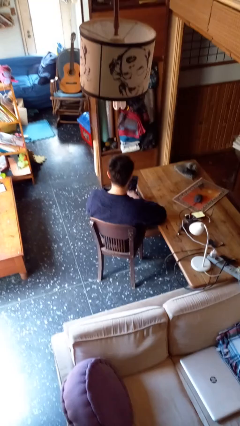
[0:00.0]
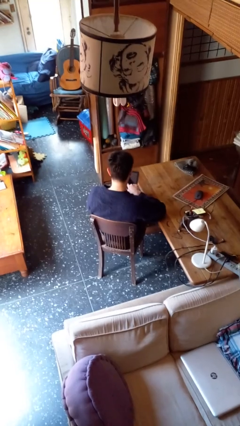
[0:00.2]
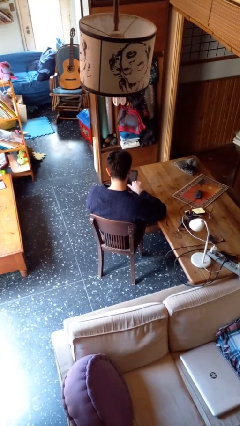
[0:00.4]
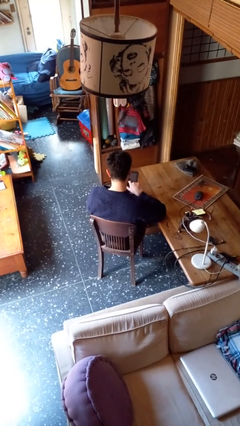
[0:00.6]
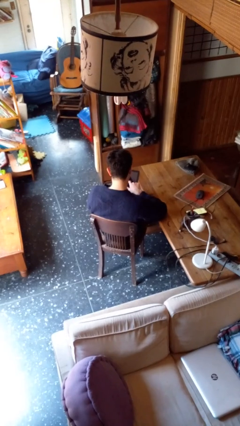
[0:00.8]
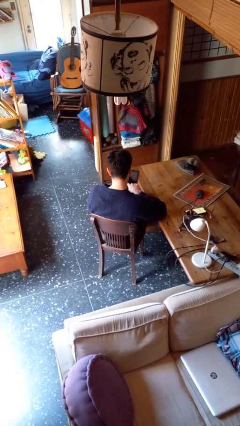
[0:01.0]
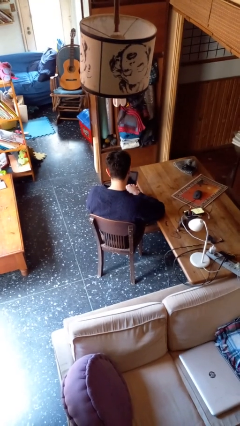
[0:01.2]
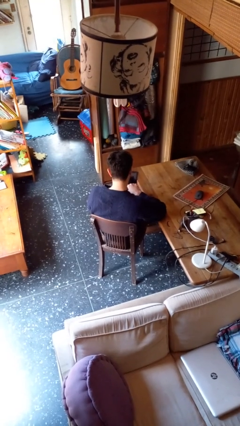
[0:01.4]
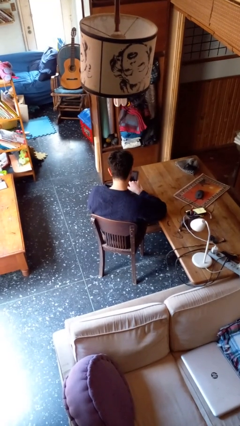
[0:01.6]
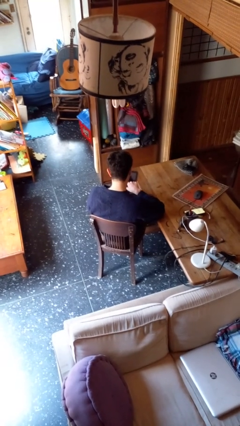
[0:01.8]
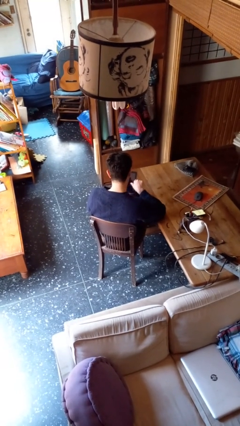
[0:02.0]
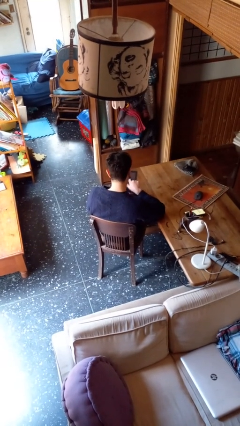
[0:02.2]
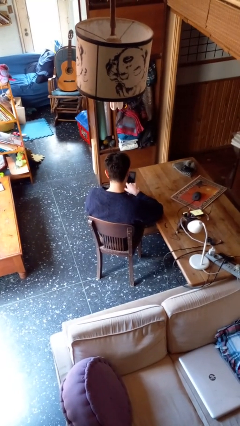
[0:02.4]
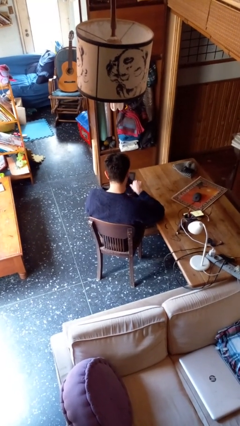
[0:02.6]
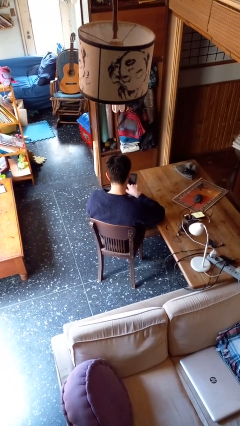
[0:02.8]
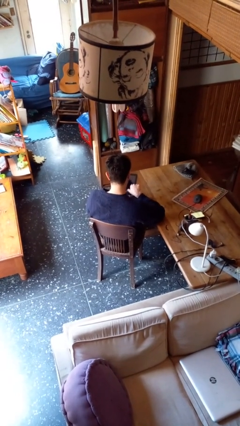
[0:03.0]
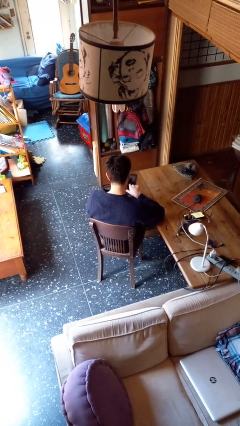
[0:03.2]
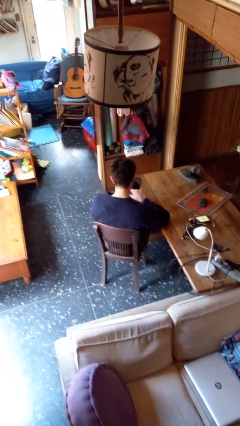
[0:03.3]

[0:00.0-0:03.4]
person interacts with tablet

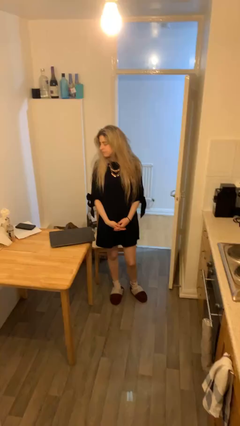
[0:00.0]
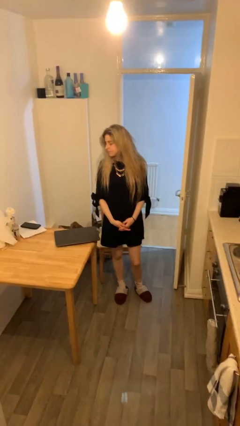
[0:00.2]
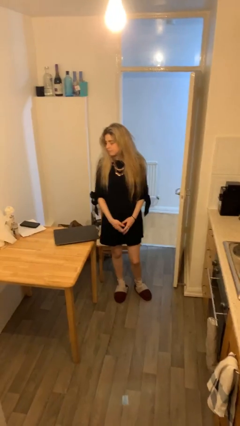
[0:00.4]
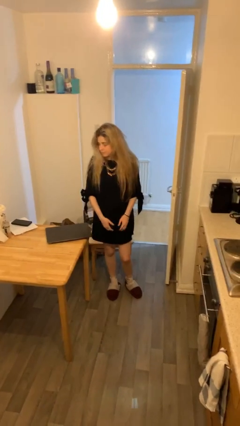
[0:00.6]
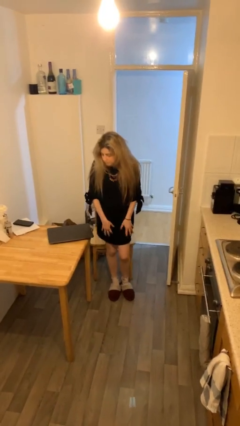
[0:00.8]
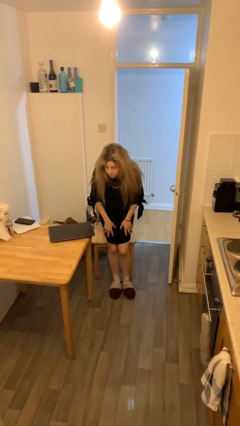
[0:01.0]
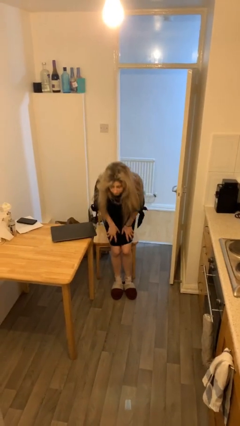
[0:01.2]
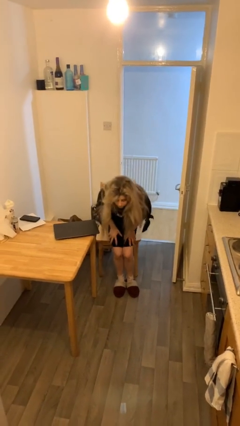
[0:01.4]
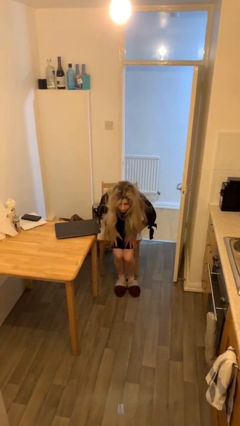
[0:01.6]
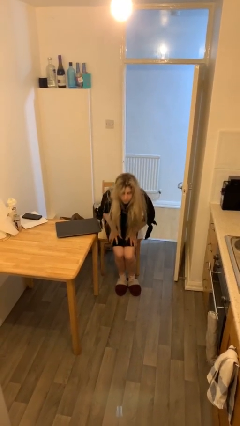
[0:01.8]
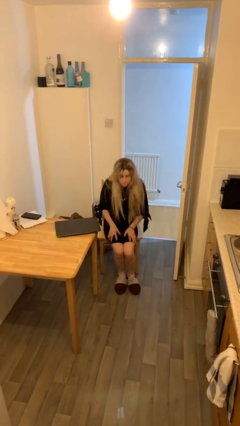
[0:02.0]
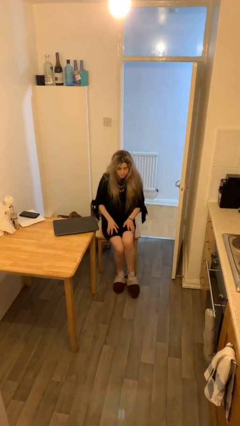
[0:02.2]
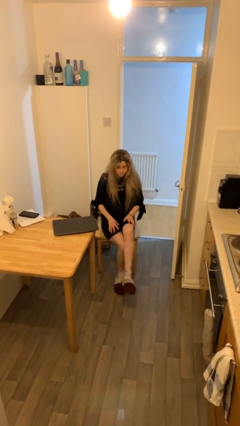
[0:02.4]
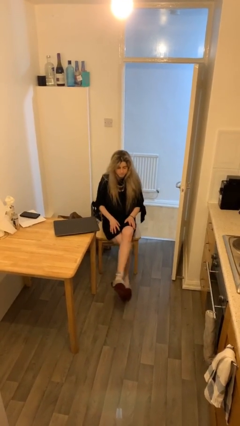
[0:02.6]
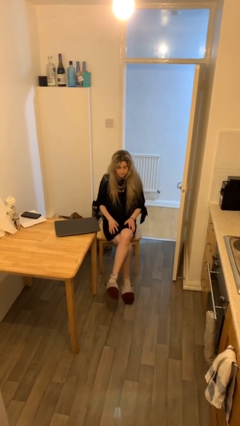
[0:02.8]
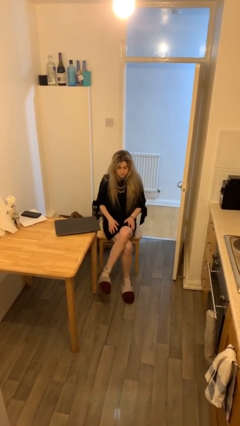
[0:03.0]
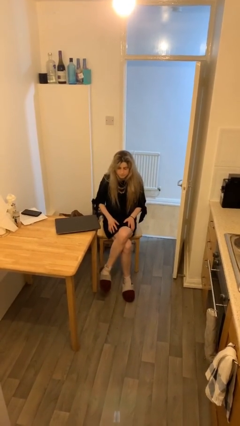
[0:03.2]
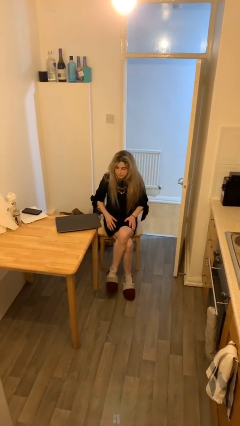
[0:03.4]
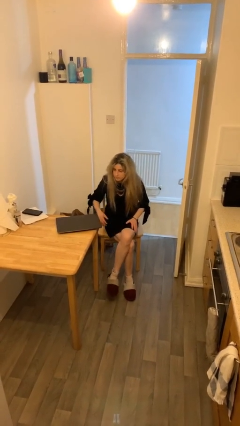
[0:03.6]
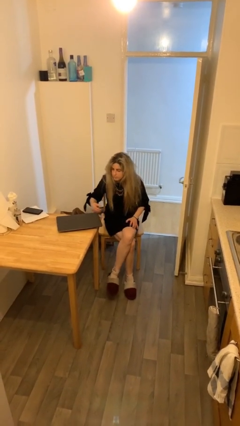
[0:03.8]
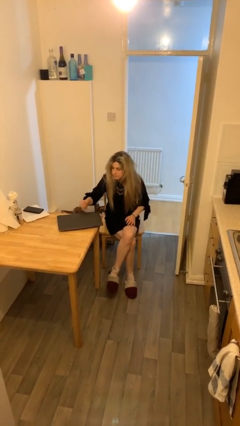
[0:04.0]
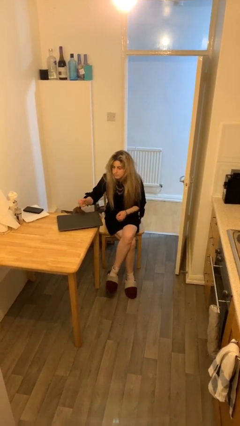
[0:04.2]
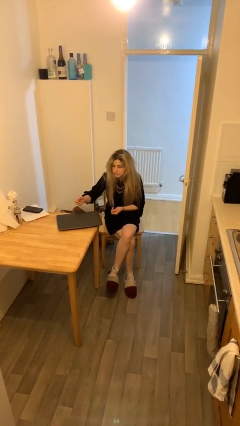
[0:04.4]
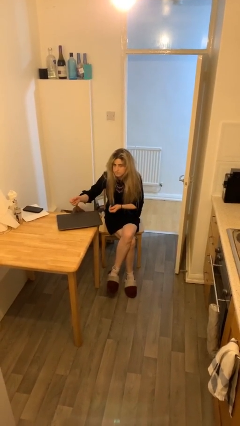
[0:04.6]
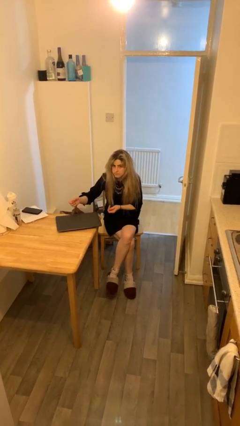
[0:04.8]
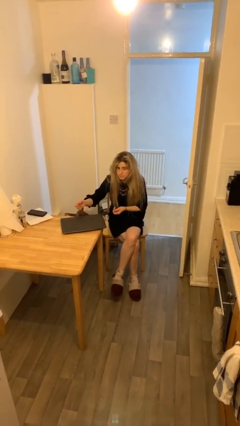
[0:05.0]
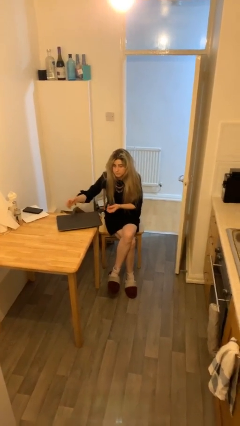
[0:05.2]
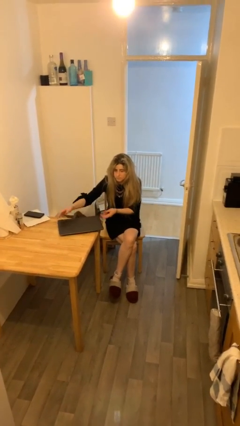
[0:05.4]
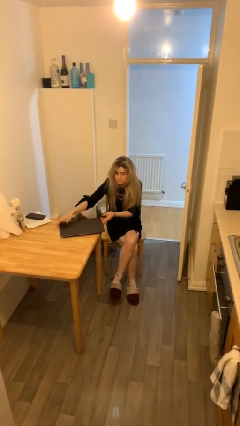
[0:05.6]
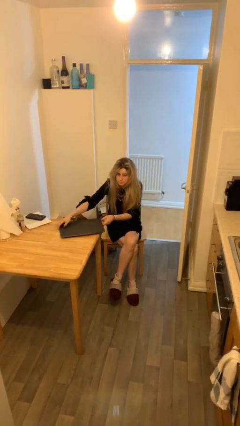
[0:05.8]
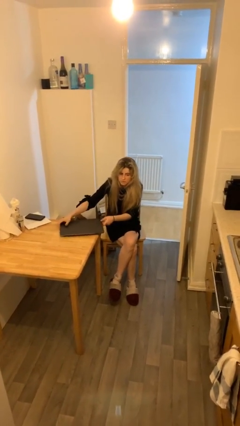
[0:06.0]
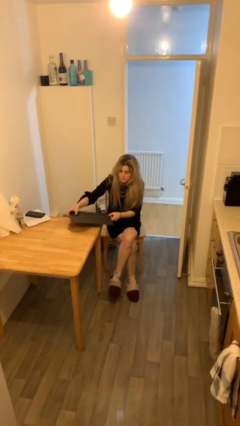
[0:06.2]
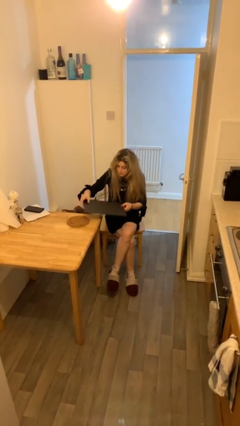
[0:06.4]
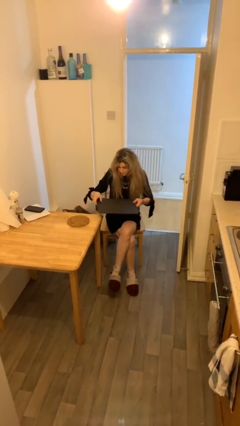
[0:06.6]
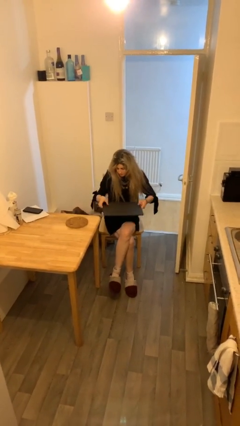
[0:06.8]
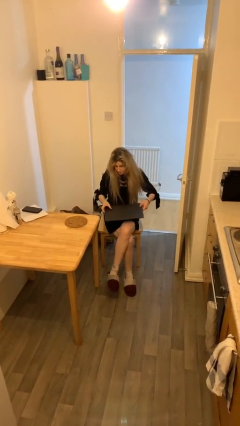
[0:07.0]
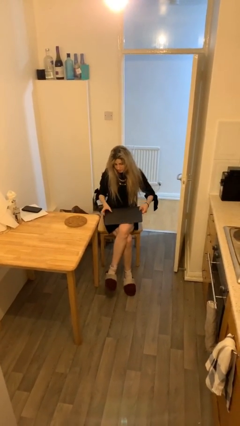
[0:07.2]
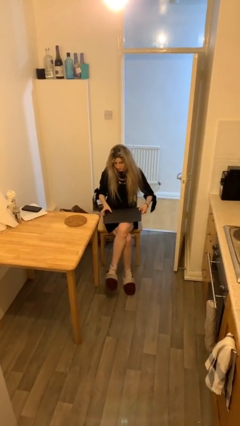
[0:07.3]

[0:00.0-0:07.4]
person sits down

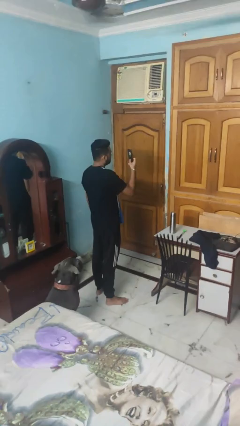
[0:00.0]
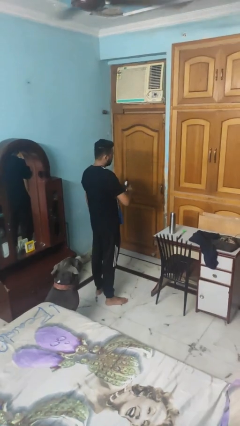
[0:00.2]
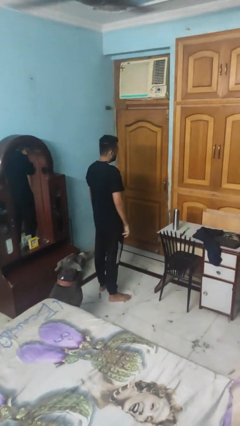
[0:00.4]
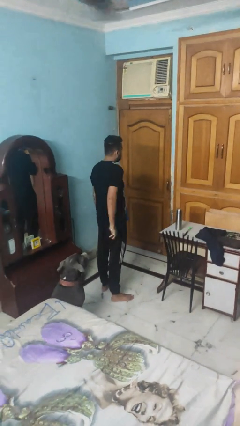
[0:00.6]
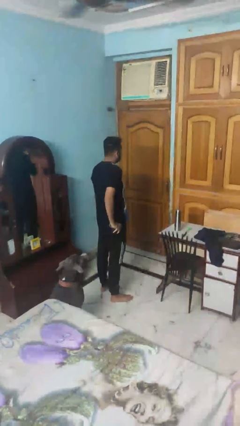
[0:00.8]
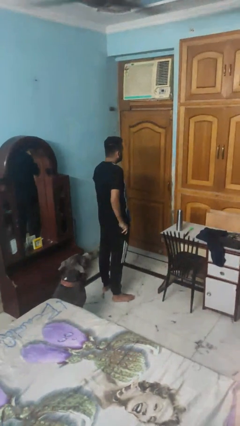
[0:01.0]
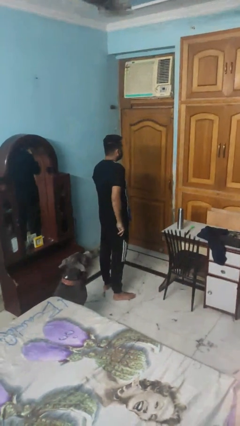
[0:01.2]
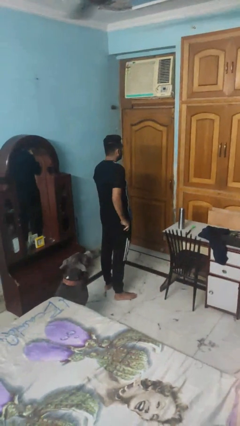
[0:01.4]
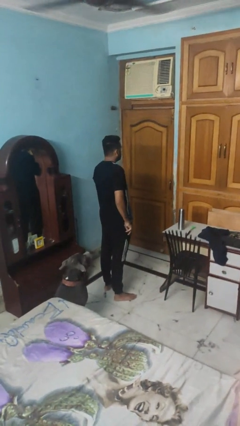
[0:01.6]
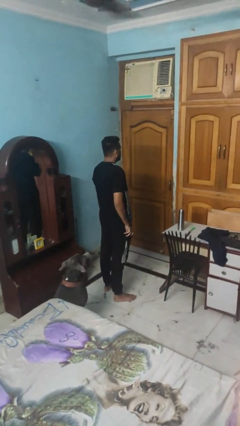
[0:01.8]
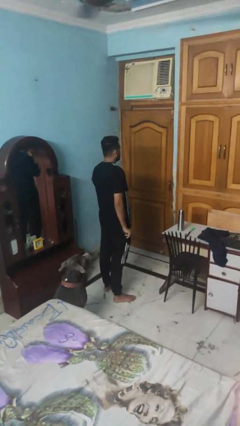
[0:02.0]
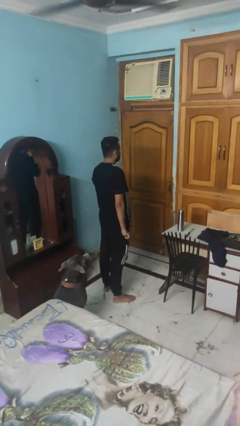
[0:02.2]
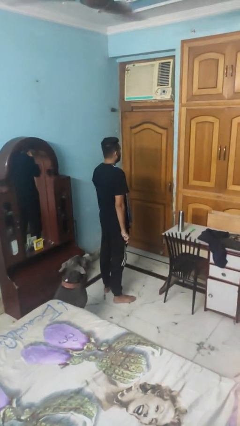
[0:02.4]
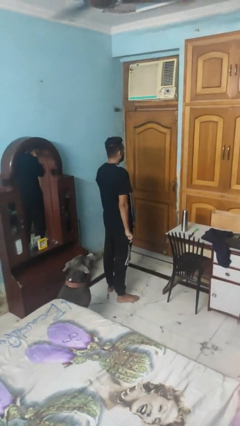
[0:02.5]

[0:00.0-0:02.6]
person puts phone into pocket

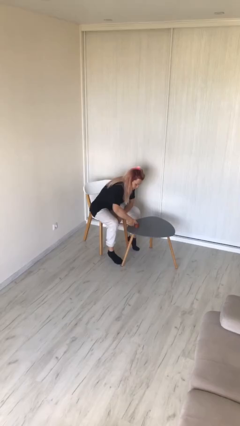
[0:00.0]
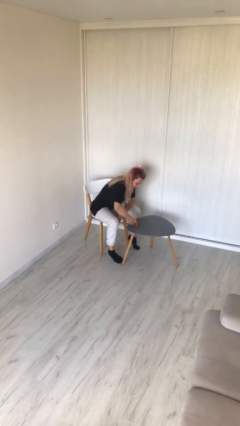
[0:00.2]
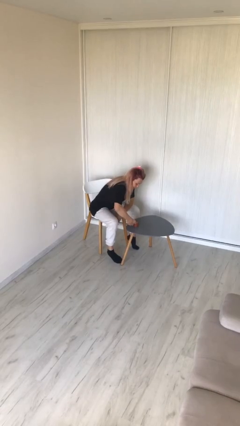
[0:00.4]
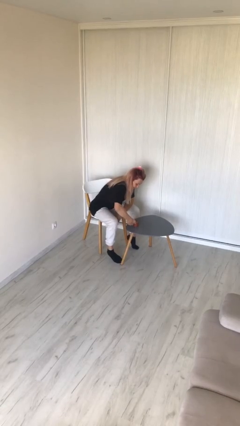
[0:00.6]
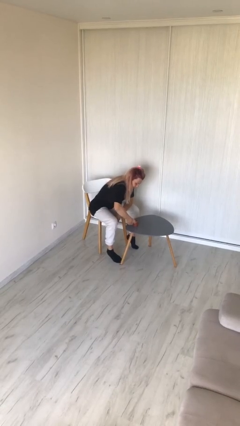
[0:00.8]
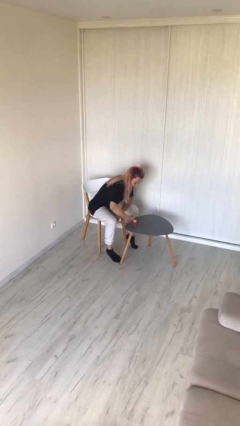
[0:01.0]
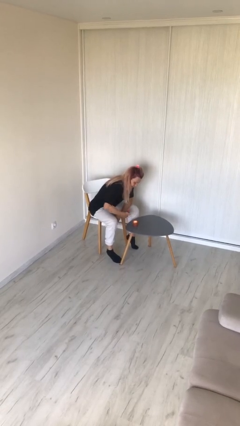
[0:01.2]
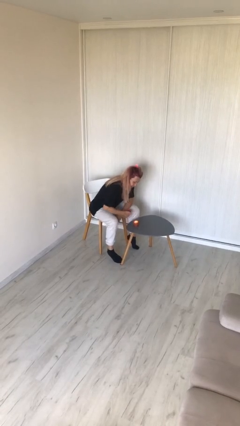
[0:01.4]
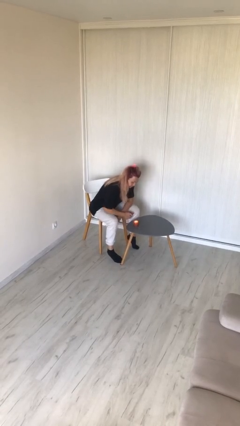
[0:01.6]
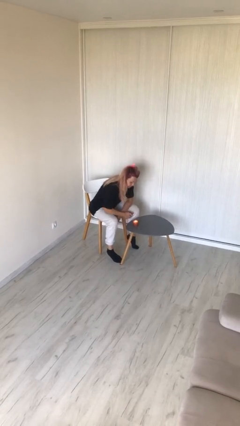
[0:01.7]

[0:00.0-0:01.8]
person lights candle

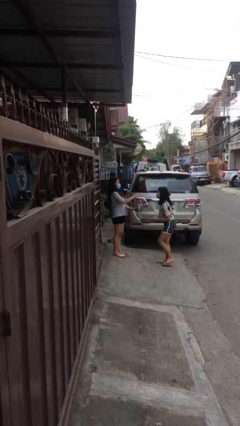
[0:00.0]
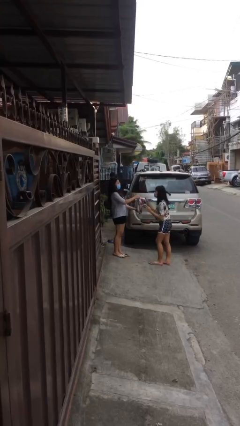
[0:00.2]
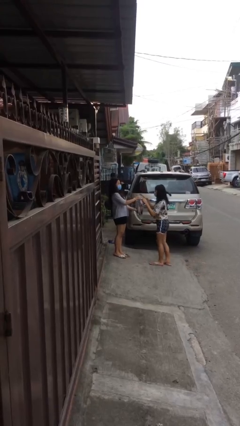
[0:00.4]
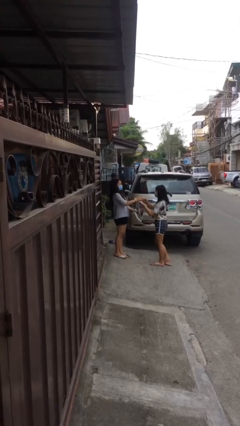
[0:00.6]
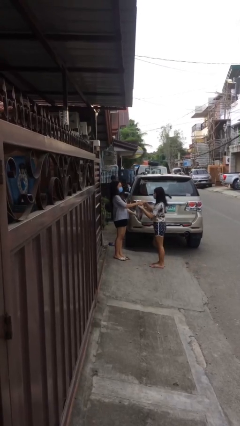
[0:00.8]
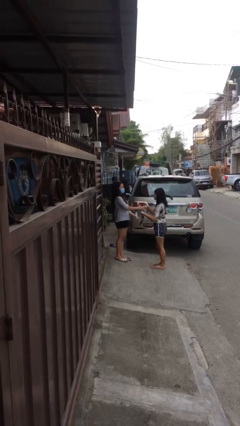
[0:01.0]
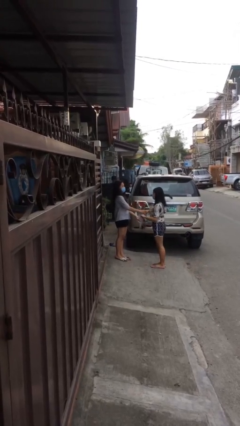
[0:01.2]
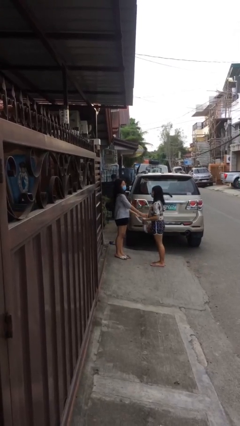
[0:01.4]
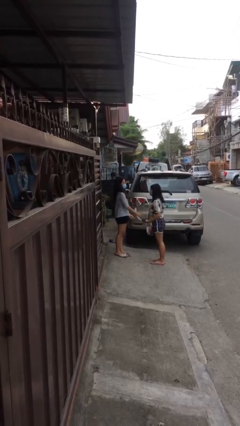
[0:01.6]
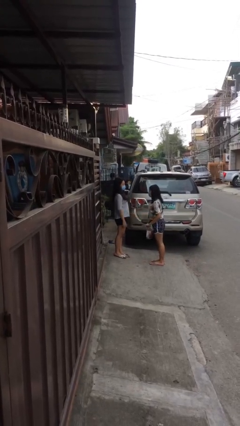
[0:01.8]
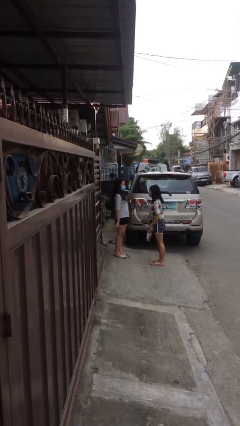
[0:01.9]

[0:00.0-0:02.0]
person transfers object to person

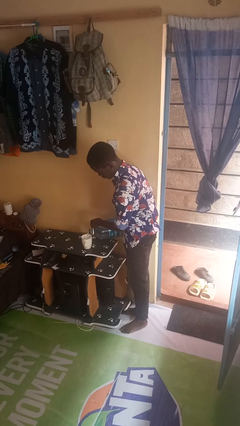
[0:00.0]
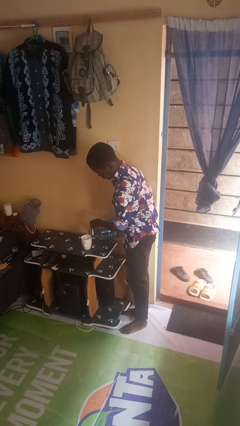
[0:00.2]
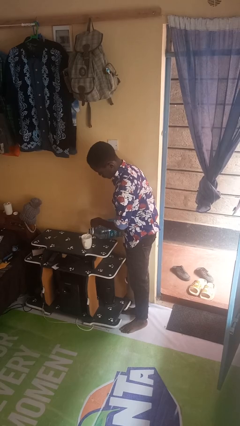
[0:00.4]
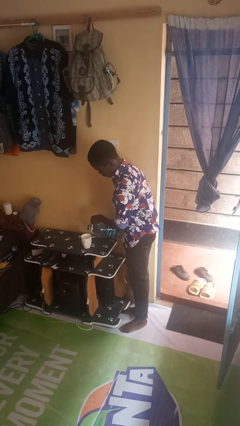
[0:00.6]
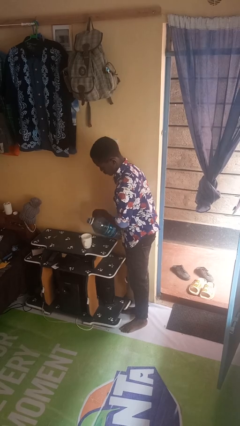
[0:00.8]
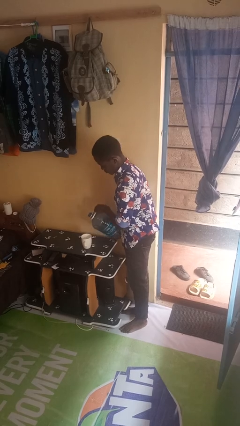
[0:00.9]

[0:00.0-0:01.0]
person pours liquid into cup
